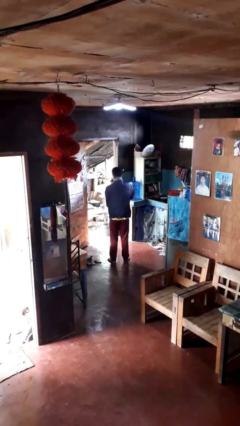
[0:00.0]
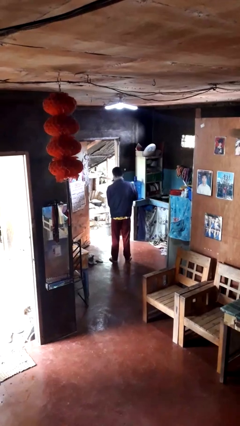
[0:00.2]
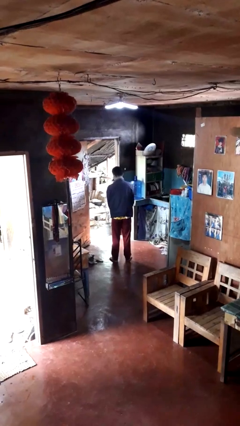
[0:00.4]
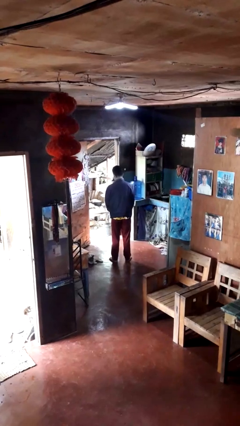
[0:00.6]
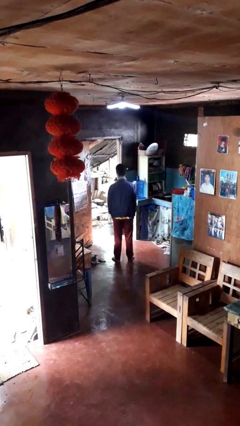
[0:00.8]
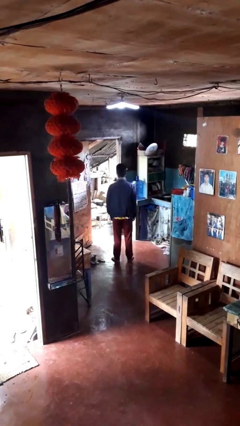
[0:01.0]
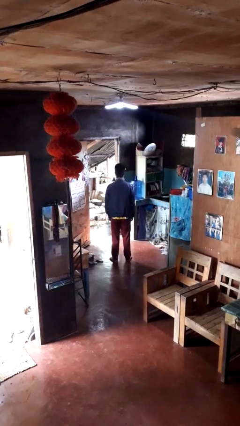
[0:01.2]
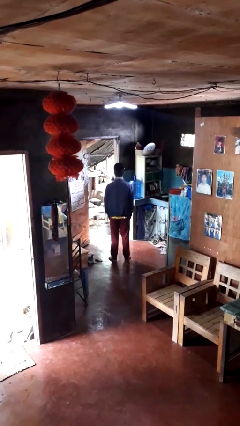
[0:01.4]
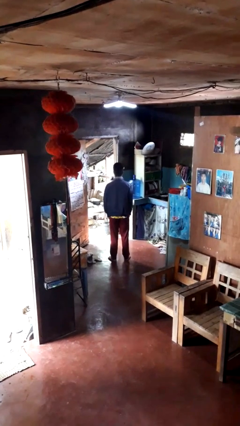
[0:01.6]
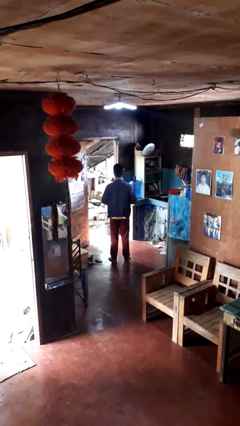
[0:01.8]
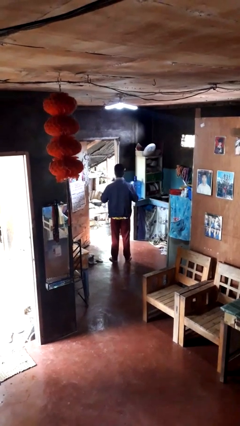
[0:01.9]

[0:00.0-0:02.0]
person unzips jacket

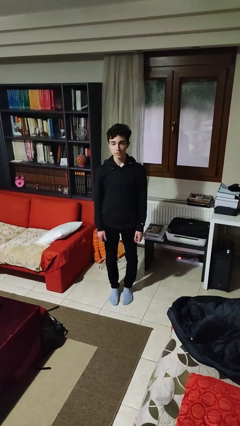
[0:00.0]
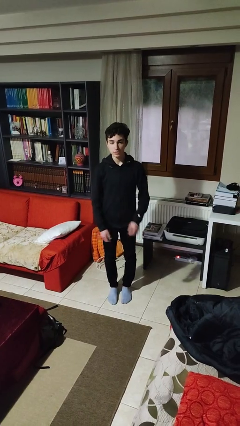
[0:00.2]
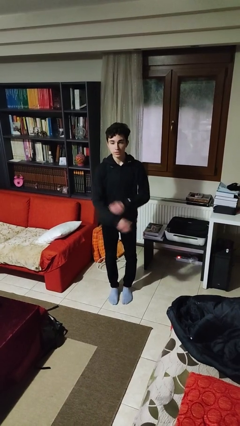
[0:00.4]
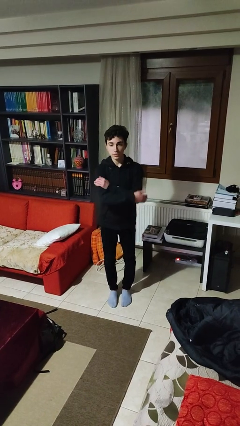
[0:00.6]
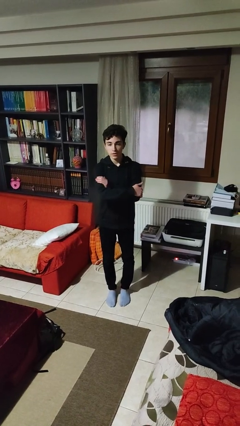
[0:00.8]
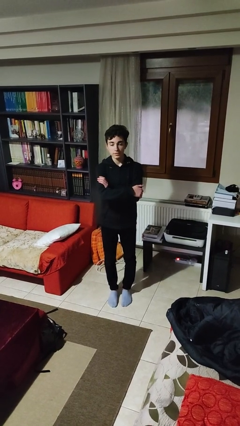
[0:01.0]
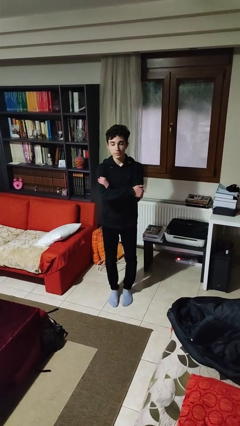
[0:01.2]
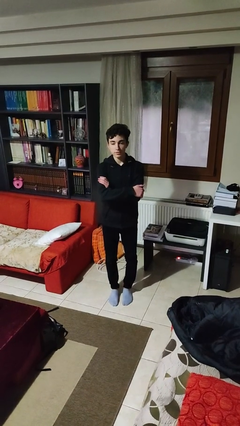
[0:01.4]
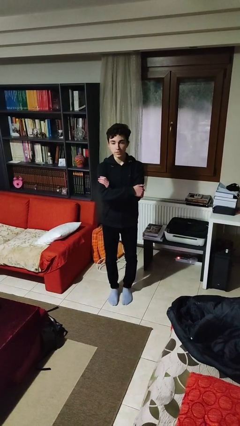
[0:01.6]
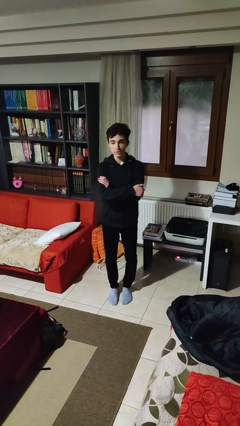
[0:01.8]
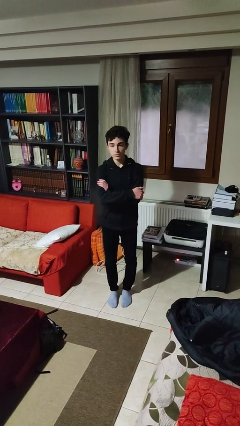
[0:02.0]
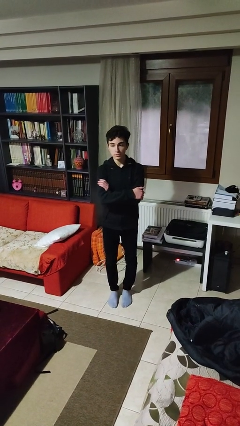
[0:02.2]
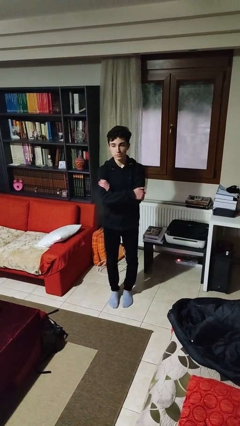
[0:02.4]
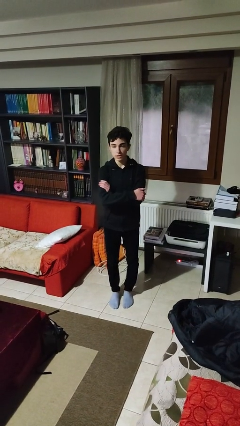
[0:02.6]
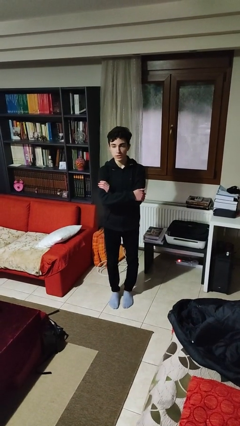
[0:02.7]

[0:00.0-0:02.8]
person crosses arms

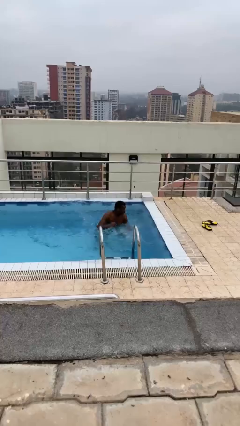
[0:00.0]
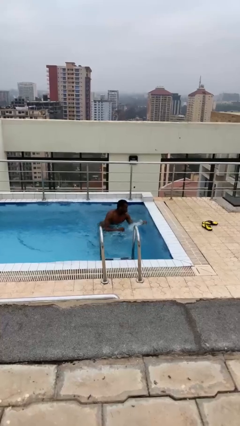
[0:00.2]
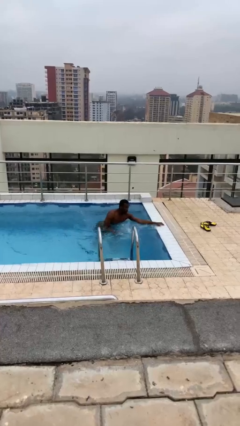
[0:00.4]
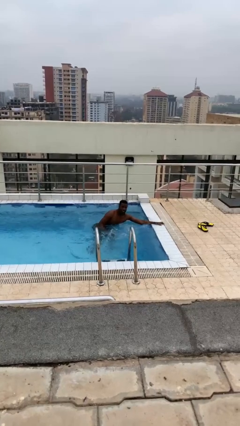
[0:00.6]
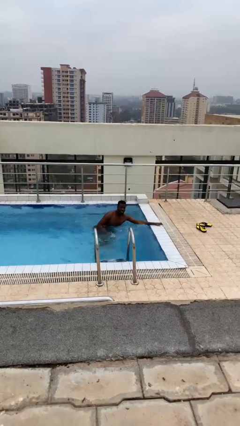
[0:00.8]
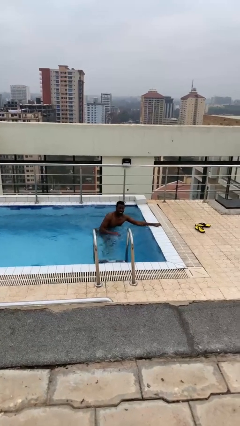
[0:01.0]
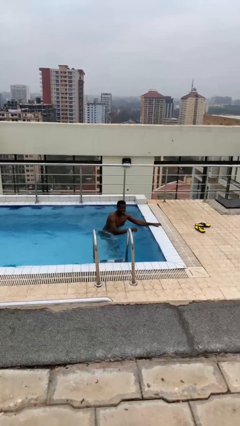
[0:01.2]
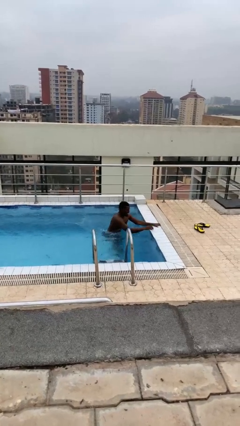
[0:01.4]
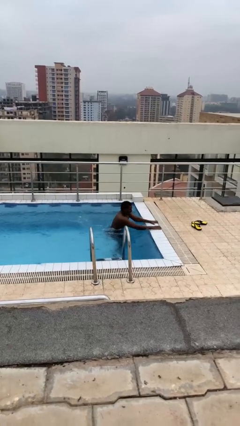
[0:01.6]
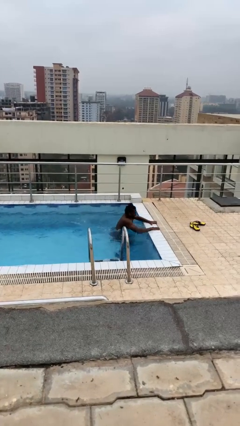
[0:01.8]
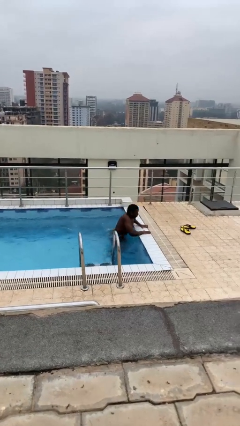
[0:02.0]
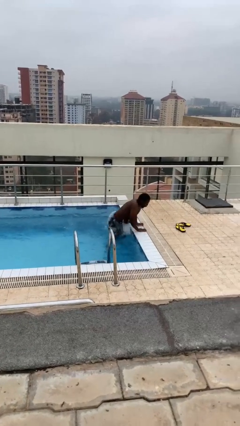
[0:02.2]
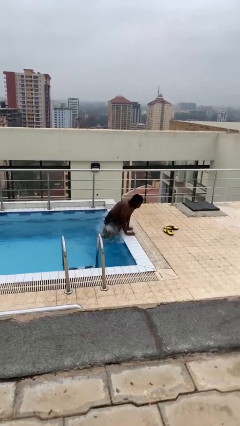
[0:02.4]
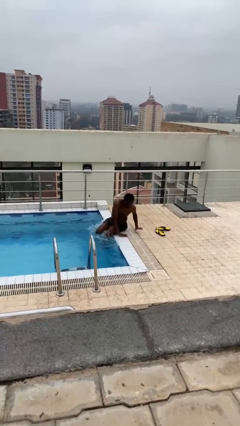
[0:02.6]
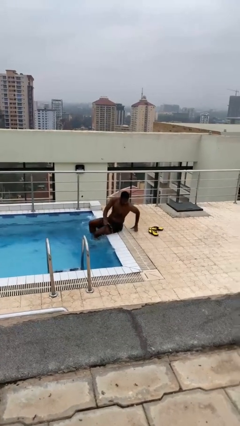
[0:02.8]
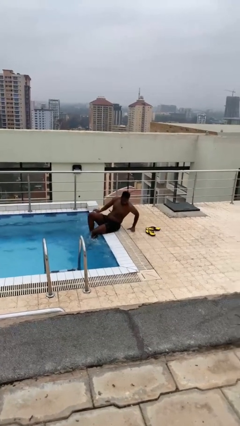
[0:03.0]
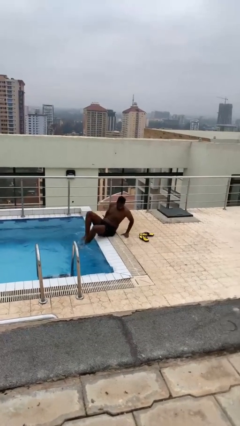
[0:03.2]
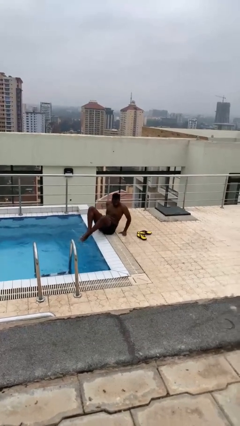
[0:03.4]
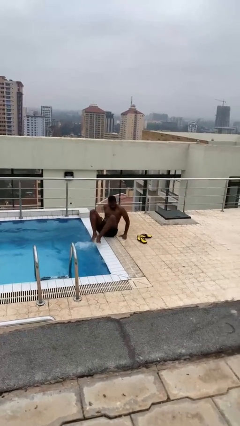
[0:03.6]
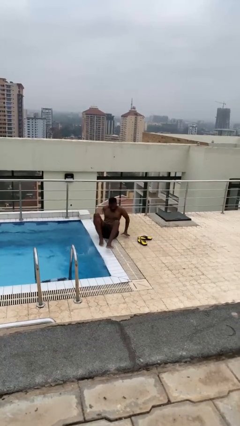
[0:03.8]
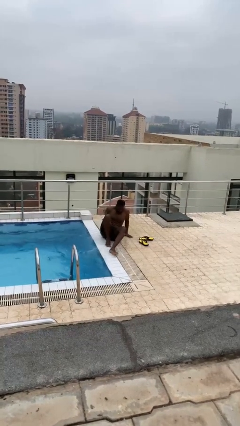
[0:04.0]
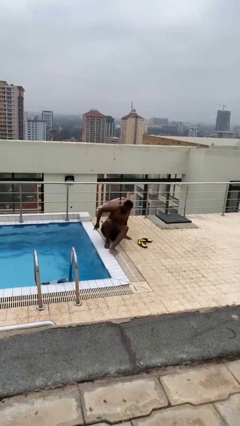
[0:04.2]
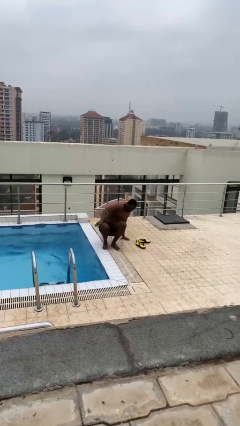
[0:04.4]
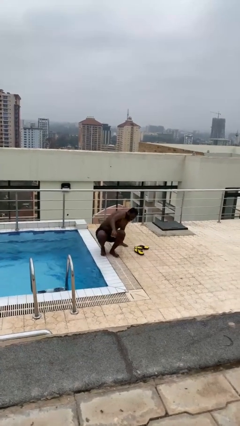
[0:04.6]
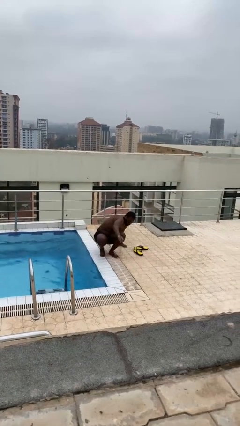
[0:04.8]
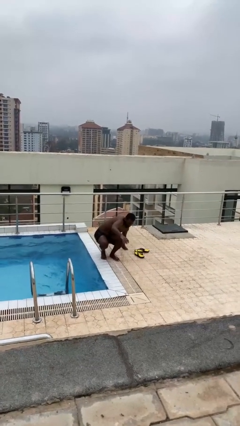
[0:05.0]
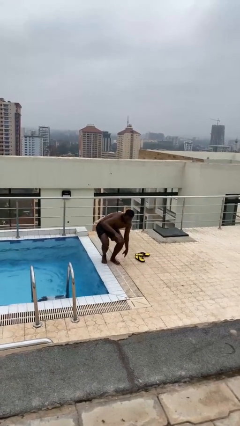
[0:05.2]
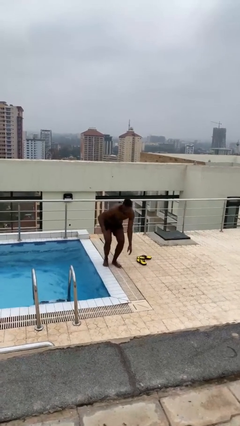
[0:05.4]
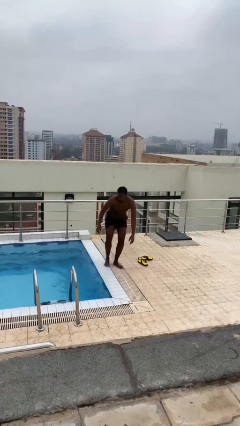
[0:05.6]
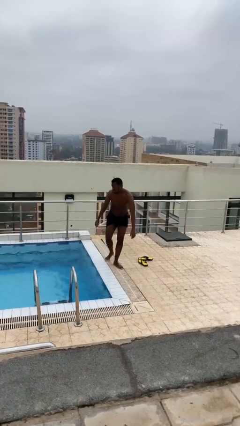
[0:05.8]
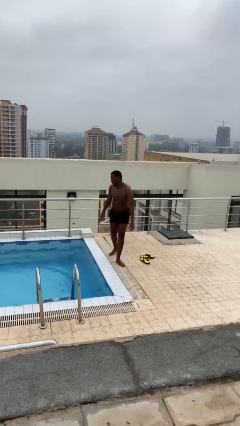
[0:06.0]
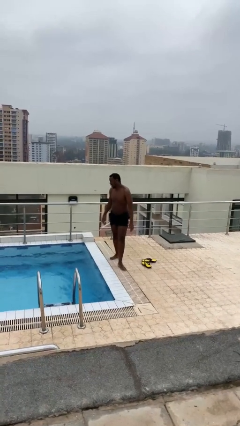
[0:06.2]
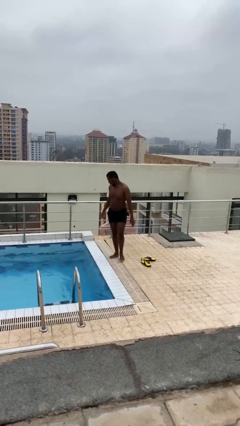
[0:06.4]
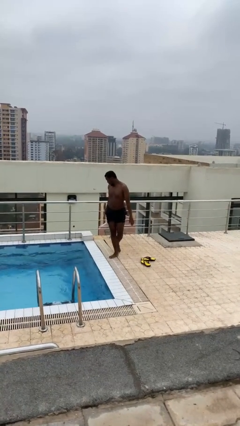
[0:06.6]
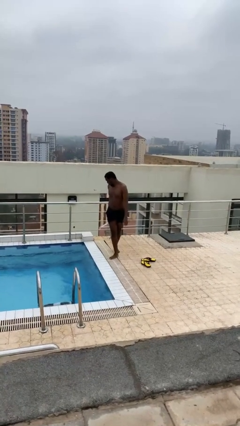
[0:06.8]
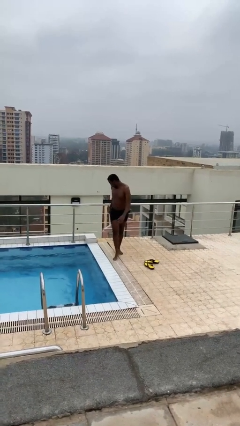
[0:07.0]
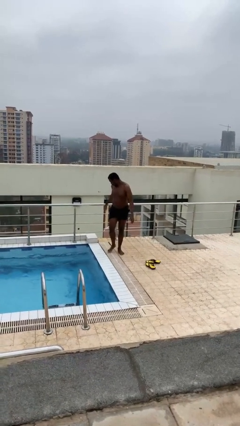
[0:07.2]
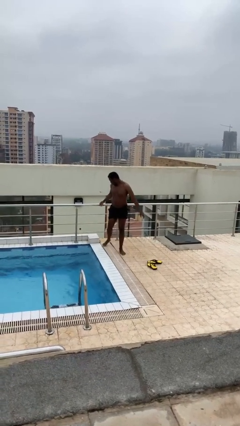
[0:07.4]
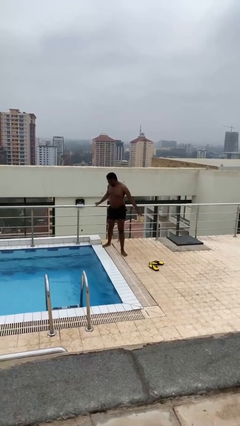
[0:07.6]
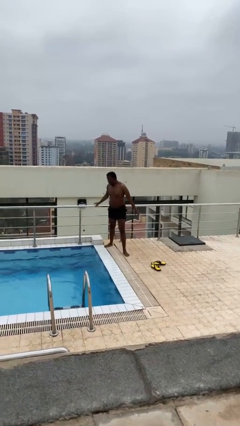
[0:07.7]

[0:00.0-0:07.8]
person exits pool

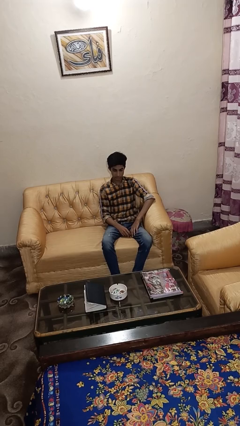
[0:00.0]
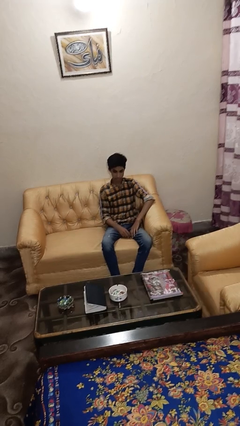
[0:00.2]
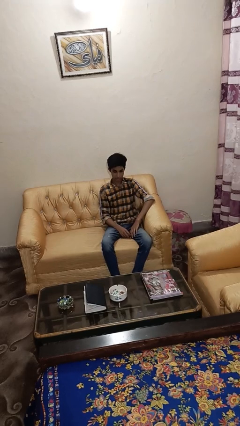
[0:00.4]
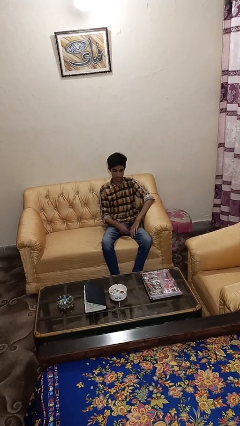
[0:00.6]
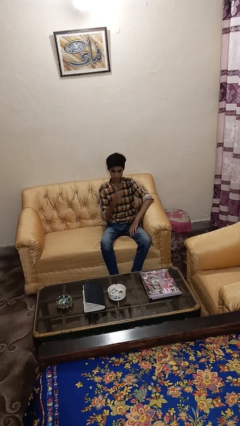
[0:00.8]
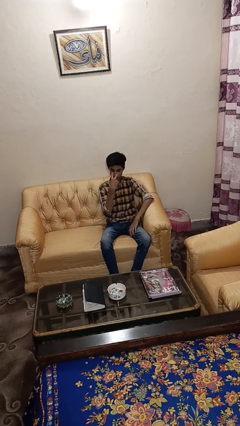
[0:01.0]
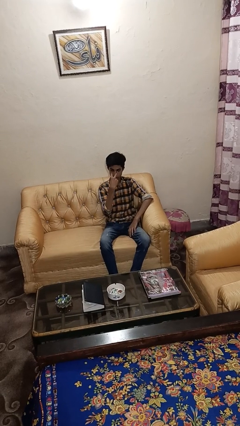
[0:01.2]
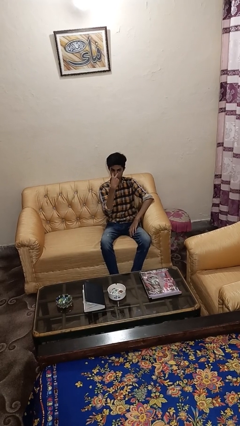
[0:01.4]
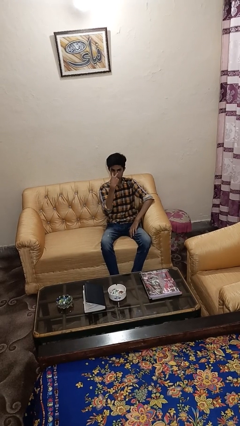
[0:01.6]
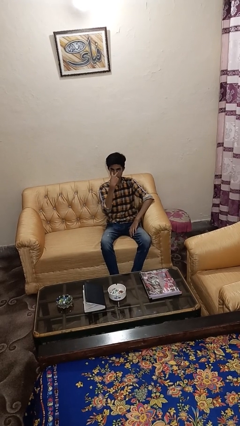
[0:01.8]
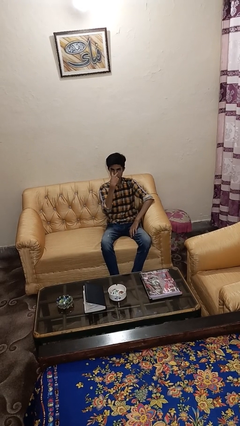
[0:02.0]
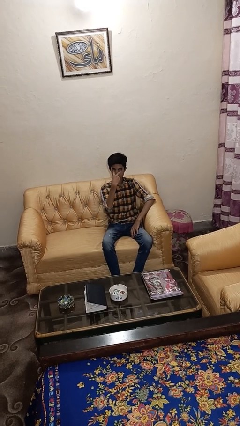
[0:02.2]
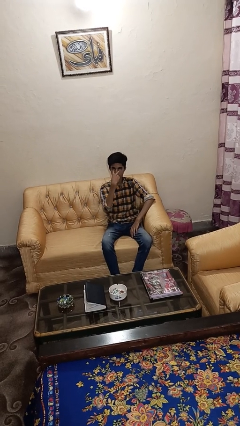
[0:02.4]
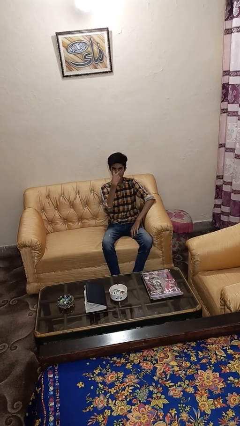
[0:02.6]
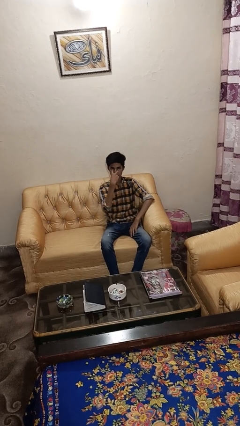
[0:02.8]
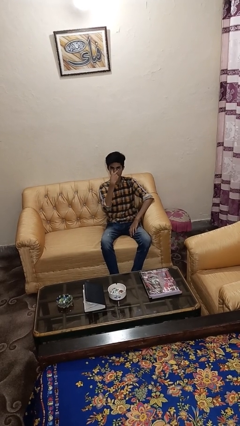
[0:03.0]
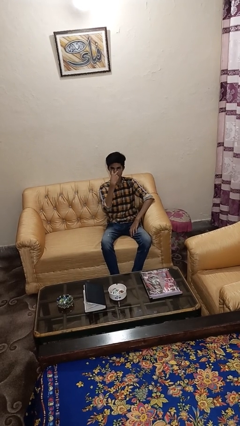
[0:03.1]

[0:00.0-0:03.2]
person gestures watch closely

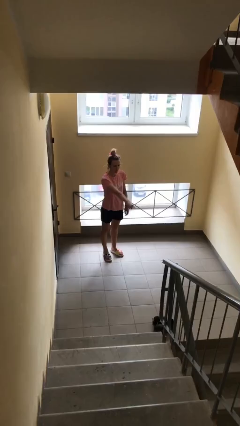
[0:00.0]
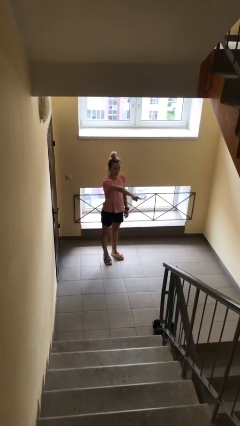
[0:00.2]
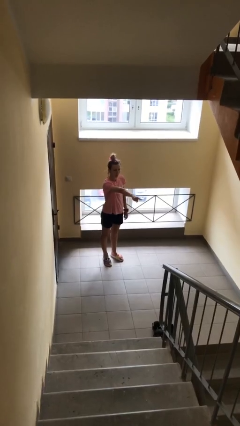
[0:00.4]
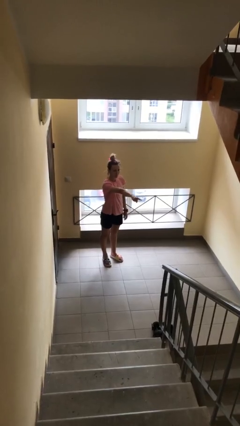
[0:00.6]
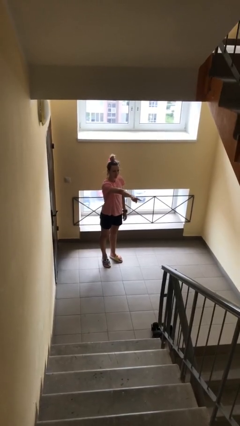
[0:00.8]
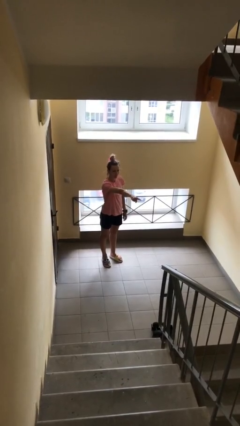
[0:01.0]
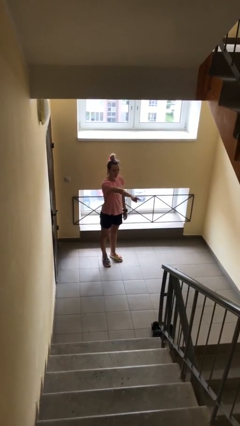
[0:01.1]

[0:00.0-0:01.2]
person points at person

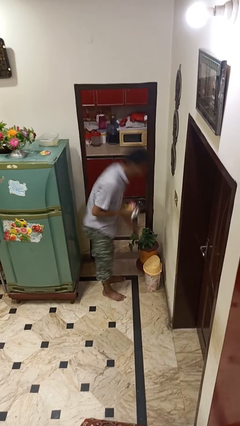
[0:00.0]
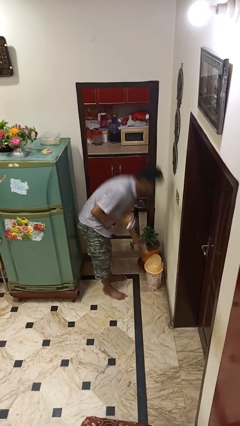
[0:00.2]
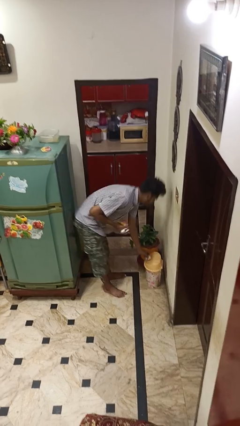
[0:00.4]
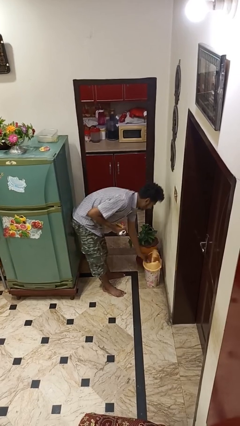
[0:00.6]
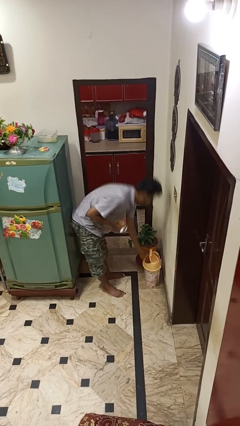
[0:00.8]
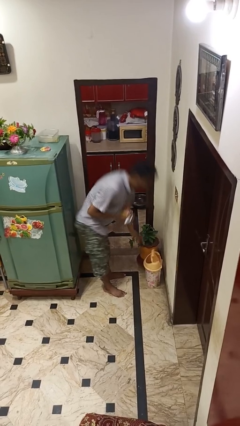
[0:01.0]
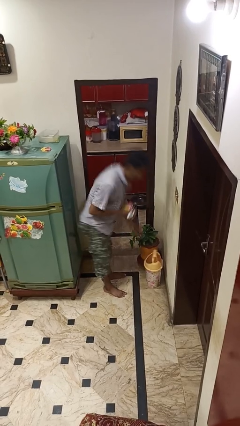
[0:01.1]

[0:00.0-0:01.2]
person discards trash
